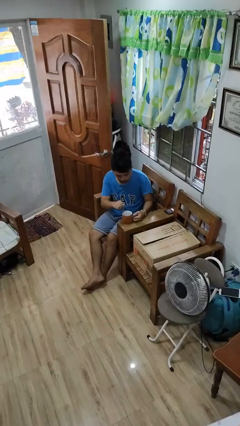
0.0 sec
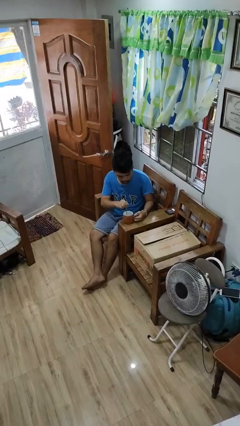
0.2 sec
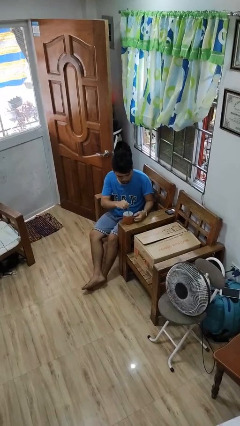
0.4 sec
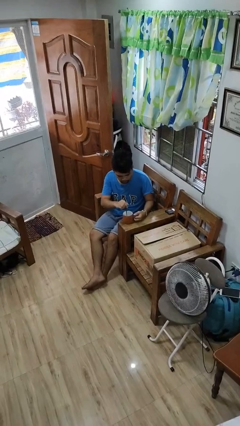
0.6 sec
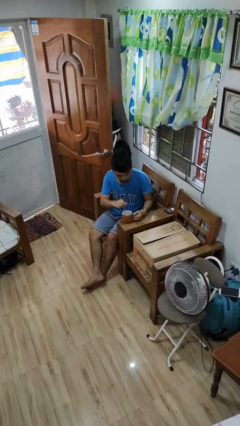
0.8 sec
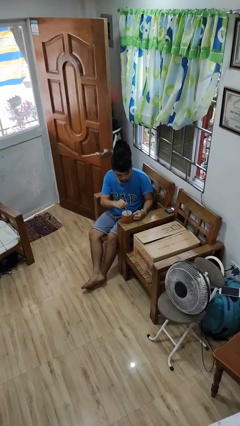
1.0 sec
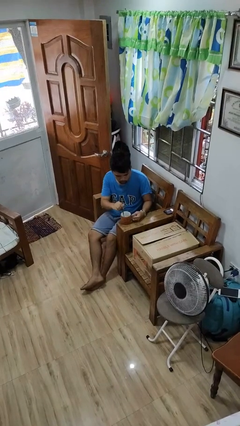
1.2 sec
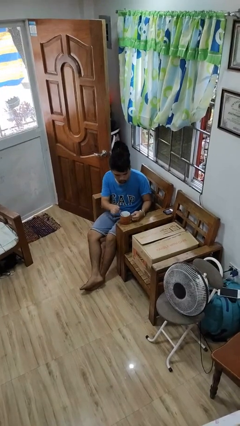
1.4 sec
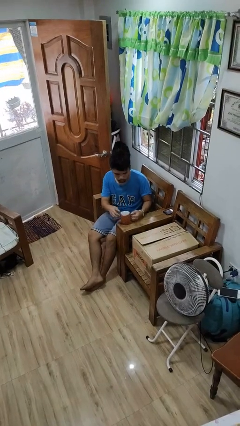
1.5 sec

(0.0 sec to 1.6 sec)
person stirs mug

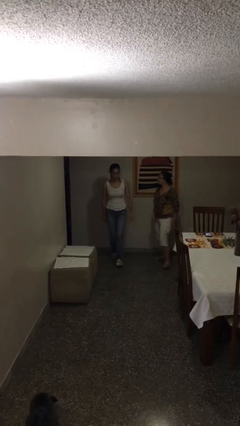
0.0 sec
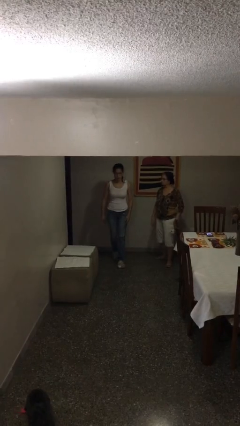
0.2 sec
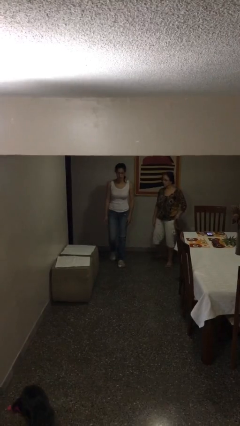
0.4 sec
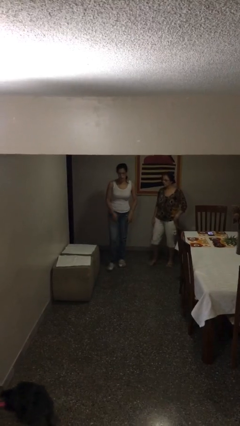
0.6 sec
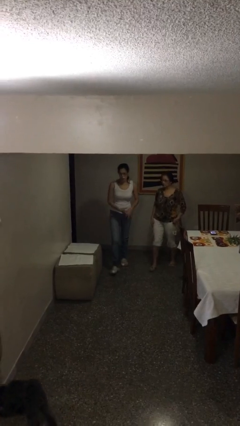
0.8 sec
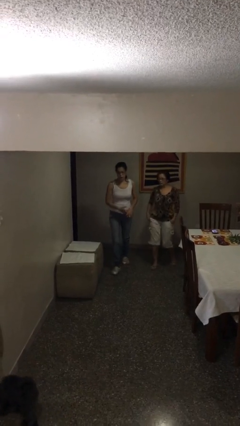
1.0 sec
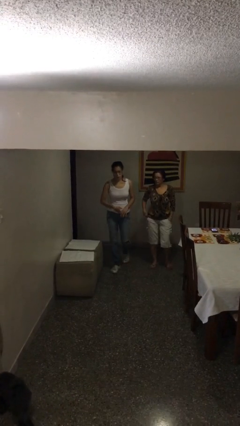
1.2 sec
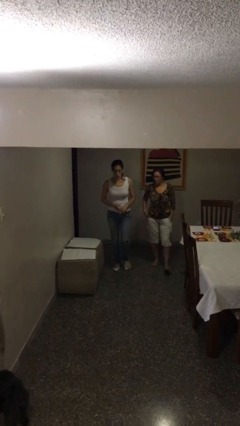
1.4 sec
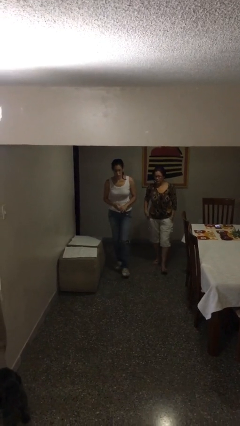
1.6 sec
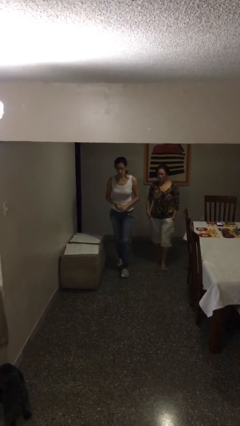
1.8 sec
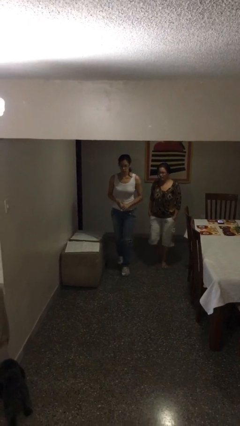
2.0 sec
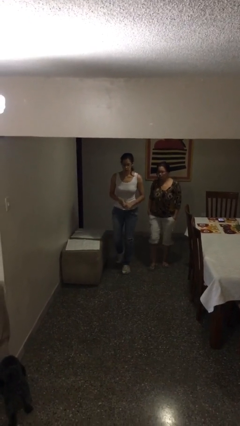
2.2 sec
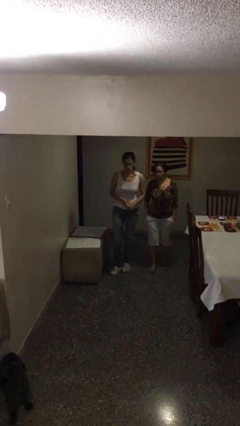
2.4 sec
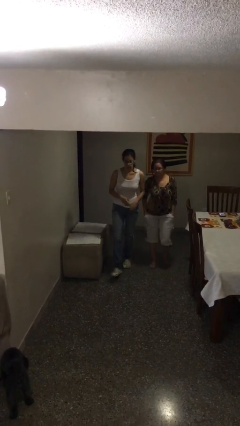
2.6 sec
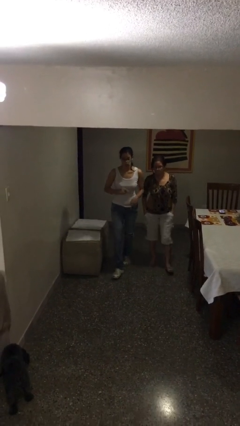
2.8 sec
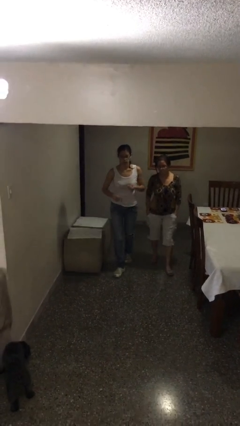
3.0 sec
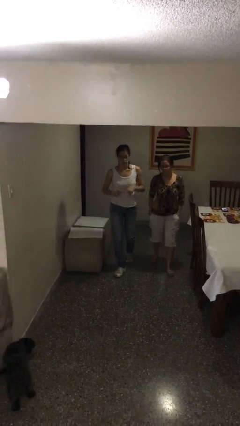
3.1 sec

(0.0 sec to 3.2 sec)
person talks to person

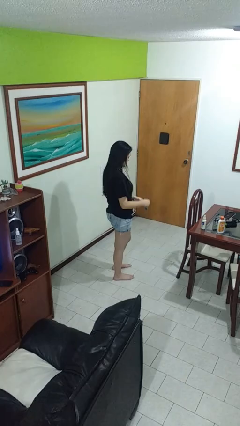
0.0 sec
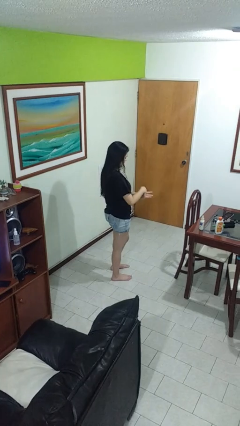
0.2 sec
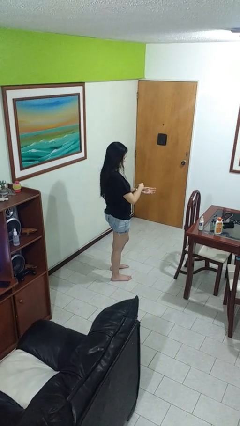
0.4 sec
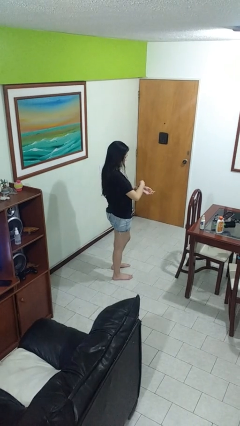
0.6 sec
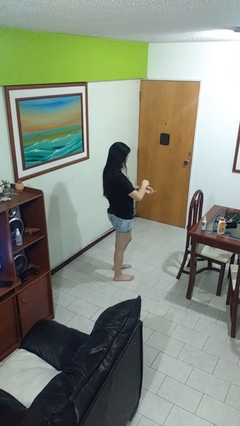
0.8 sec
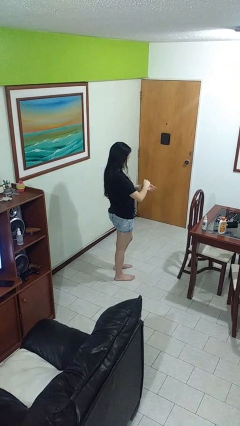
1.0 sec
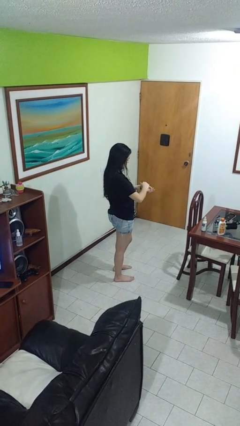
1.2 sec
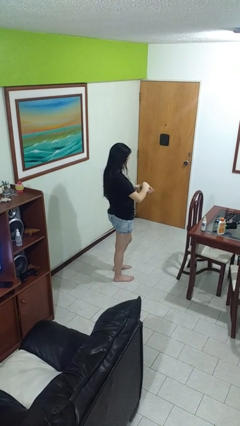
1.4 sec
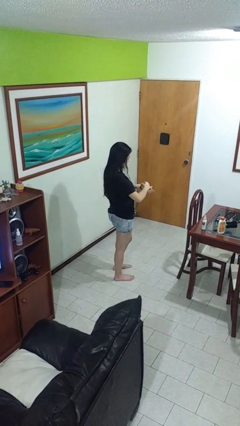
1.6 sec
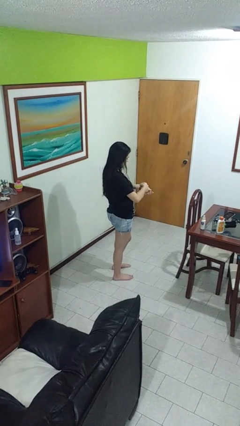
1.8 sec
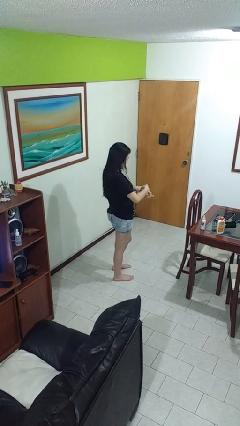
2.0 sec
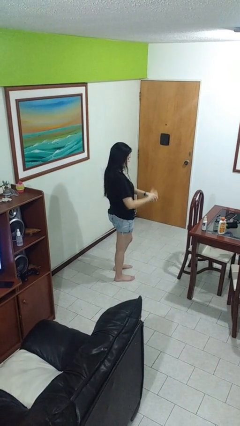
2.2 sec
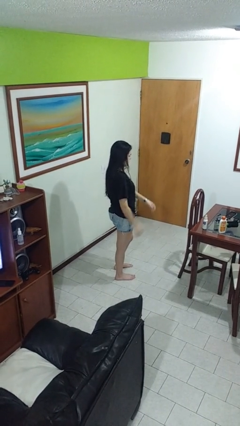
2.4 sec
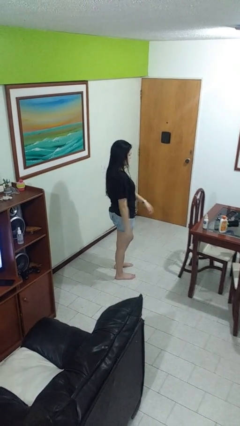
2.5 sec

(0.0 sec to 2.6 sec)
person puts on wristwatch

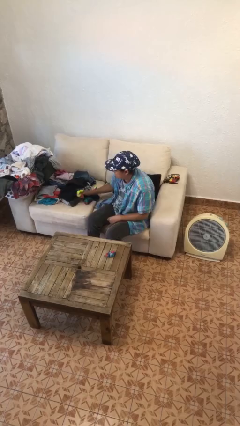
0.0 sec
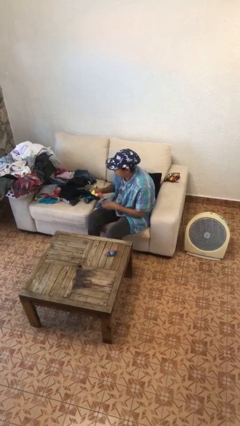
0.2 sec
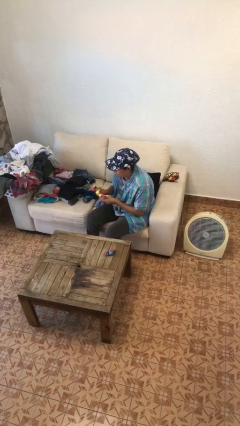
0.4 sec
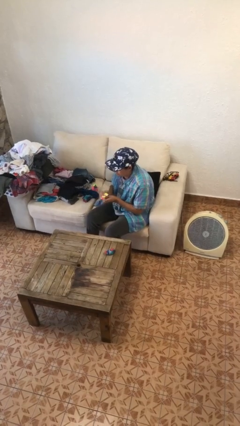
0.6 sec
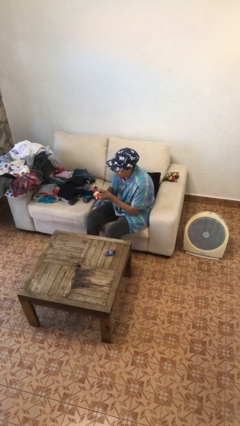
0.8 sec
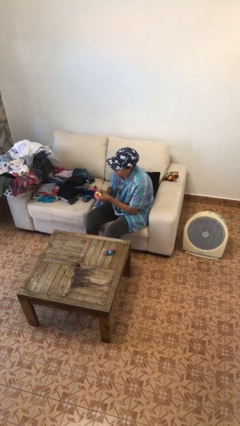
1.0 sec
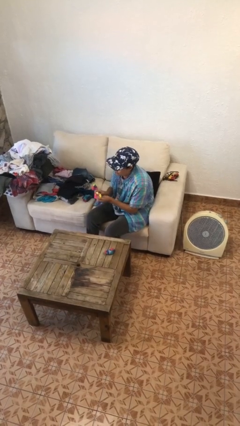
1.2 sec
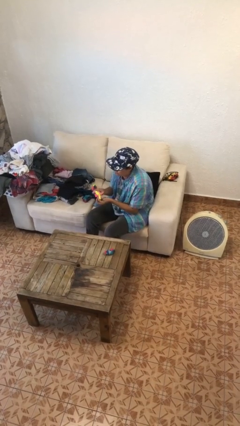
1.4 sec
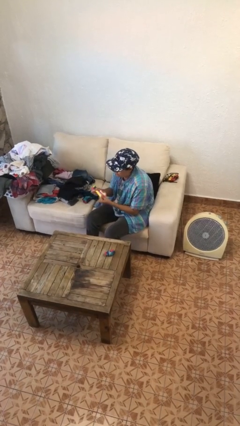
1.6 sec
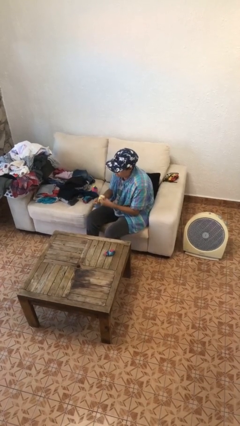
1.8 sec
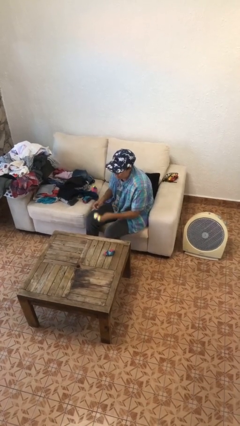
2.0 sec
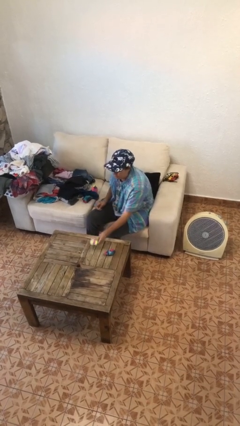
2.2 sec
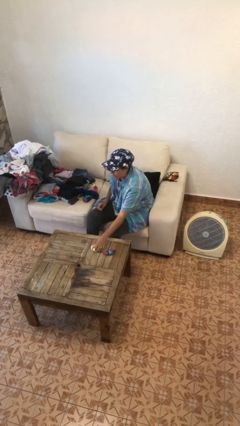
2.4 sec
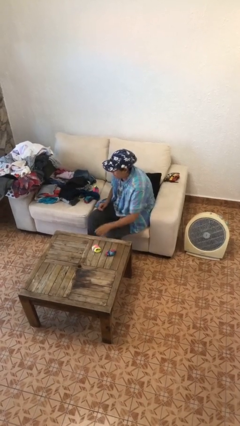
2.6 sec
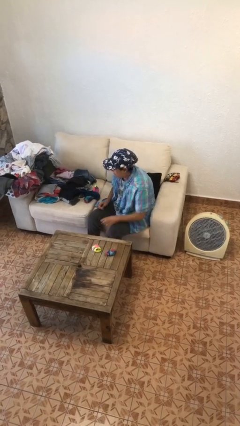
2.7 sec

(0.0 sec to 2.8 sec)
person folds socks

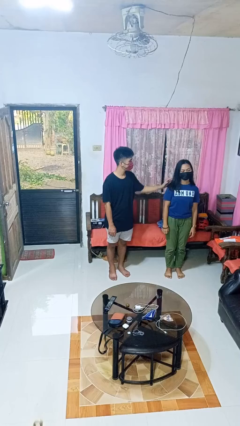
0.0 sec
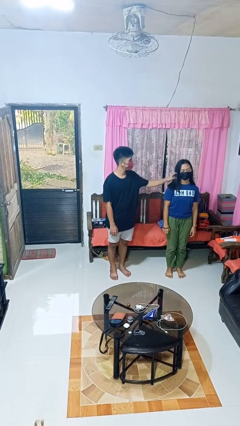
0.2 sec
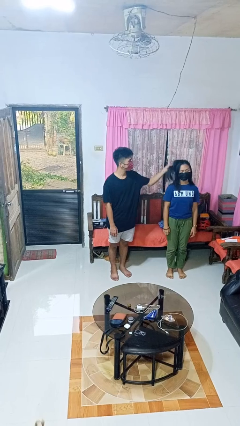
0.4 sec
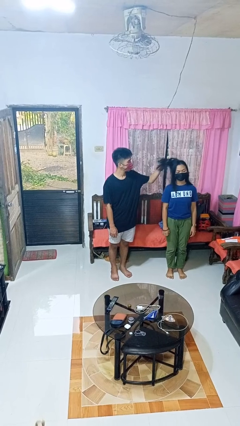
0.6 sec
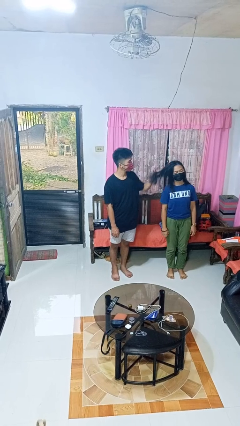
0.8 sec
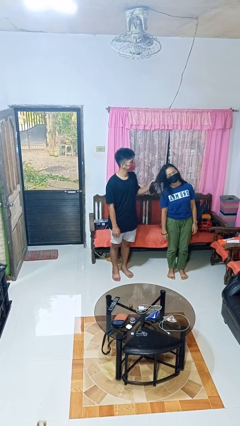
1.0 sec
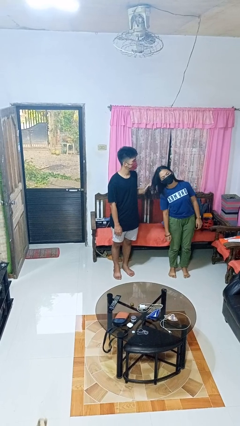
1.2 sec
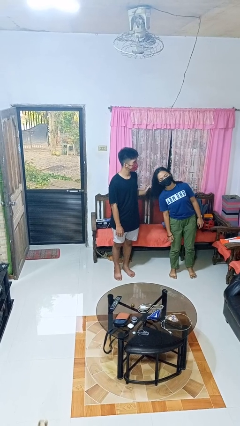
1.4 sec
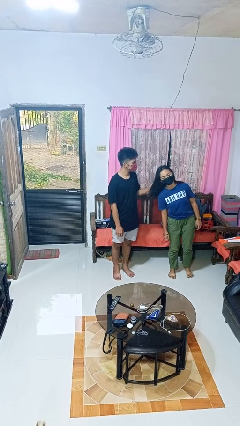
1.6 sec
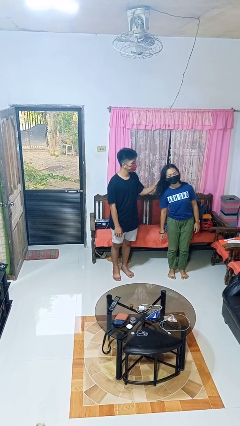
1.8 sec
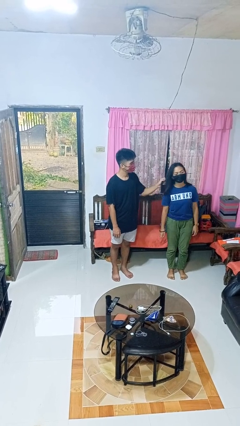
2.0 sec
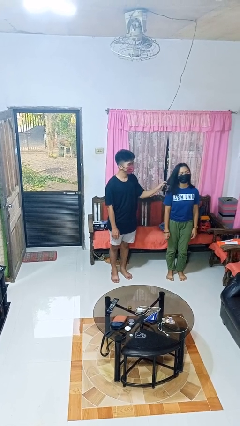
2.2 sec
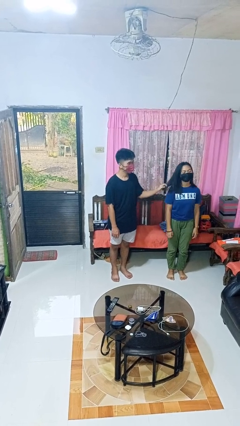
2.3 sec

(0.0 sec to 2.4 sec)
person grabs person by hair

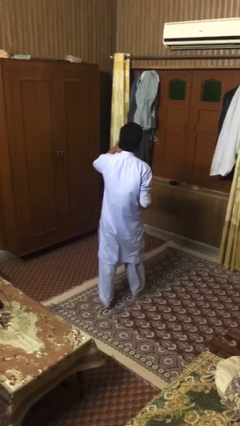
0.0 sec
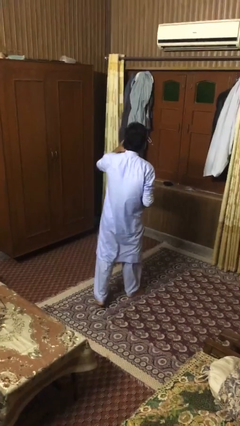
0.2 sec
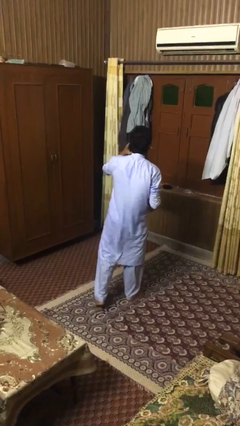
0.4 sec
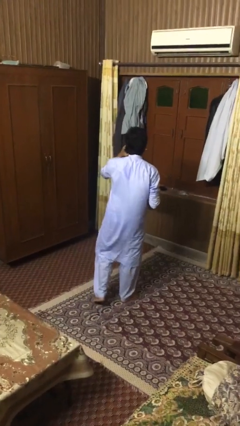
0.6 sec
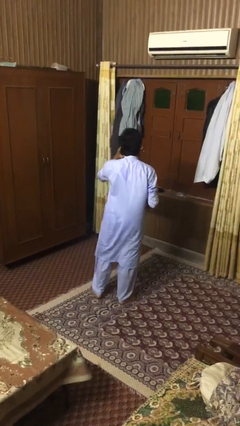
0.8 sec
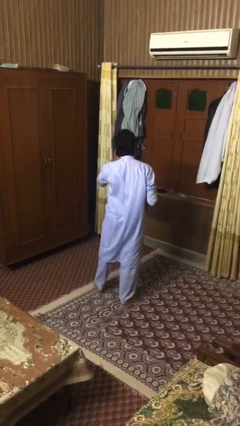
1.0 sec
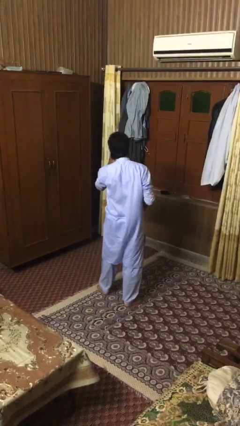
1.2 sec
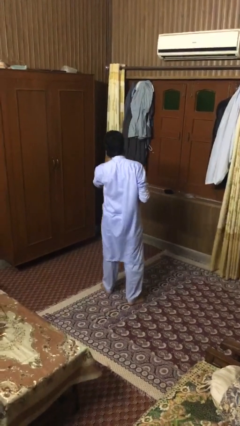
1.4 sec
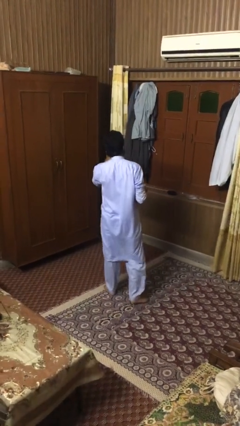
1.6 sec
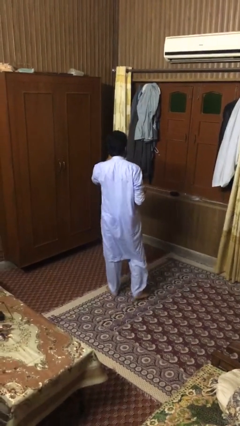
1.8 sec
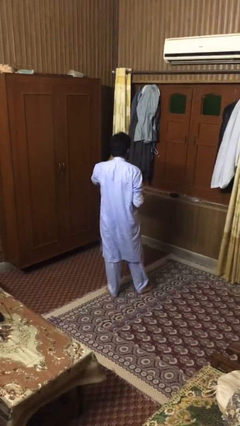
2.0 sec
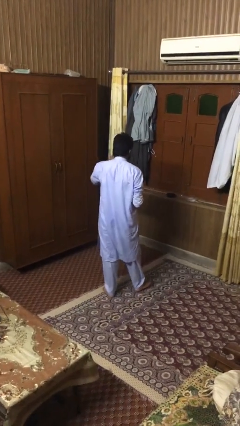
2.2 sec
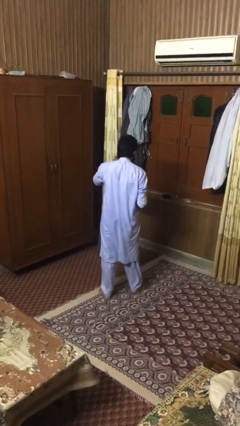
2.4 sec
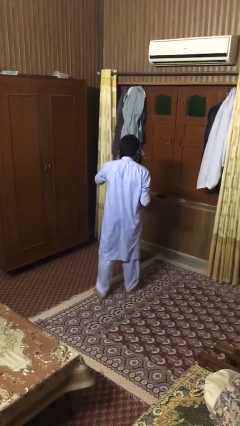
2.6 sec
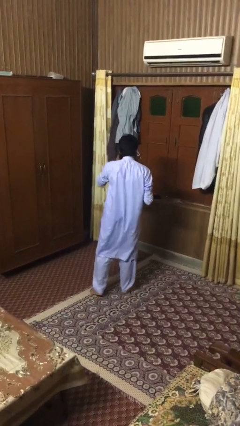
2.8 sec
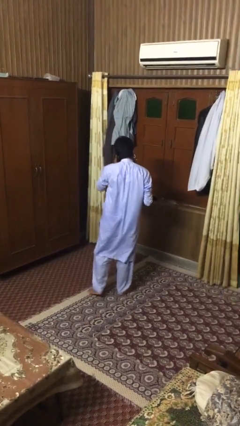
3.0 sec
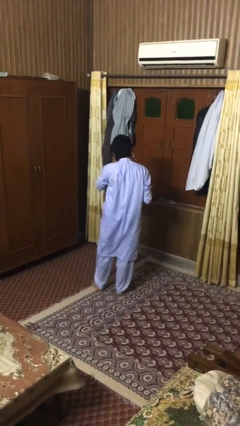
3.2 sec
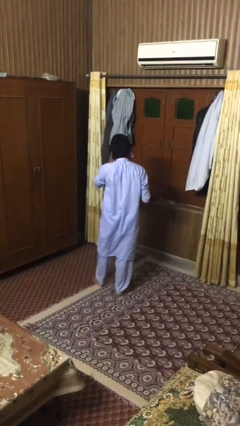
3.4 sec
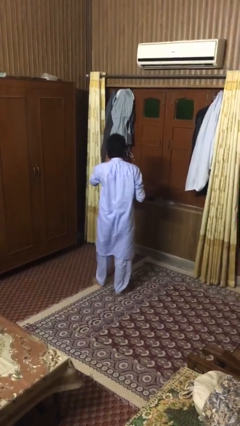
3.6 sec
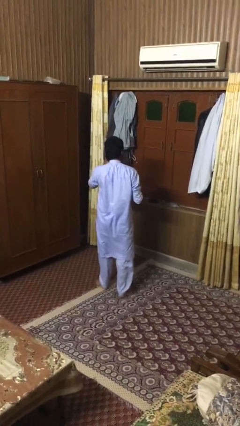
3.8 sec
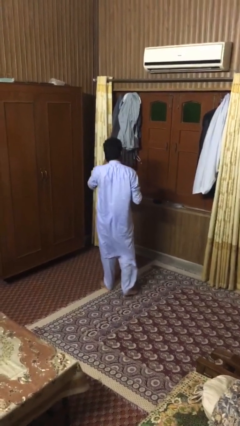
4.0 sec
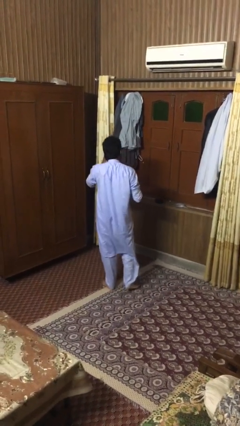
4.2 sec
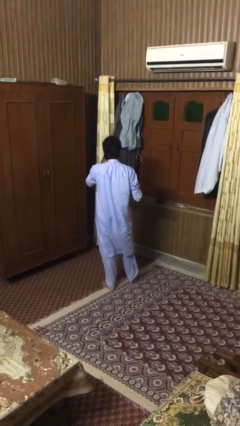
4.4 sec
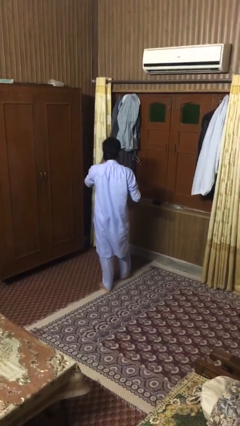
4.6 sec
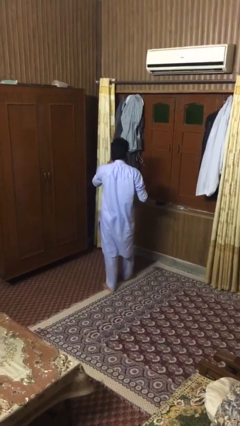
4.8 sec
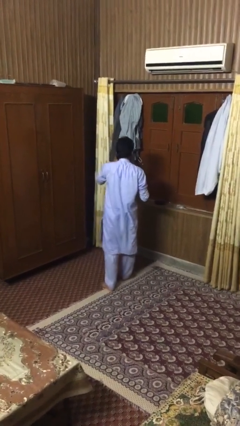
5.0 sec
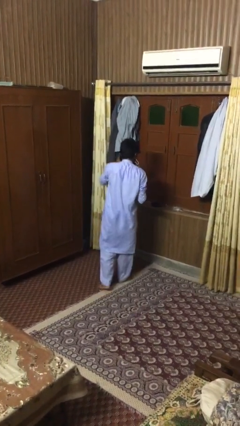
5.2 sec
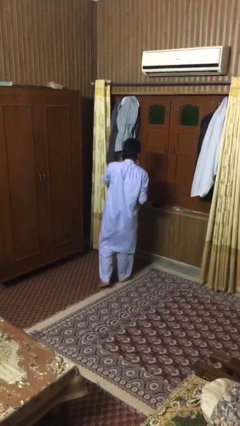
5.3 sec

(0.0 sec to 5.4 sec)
person talks on phone
